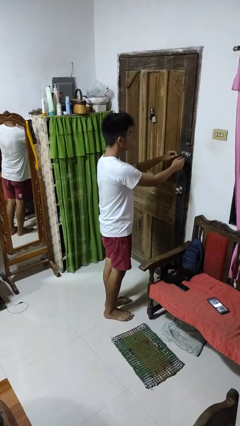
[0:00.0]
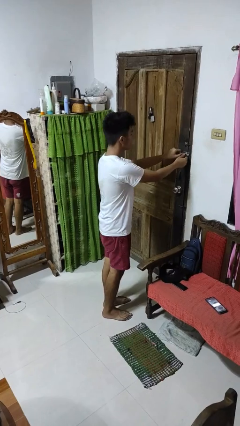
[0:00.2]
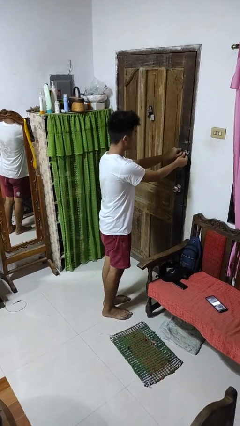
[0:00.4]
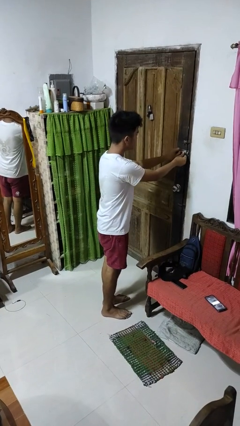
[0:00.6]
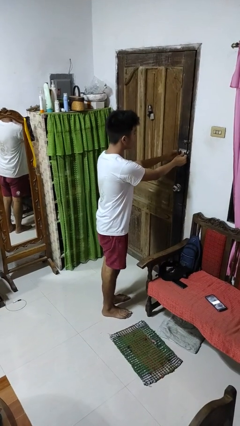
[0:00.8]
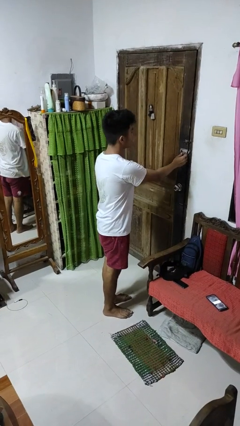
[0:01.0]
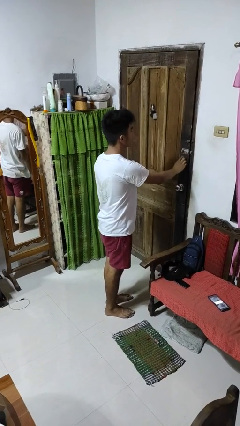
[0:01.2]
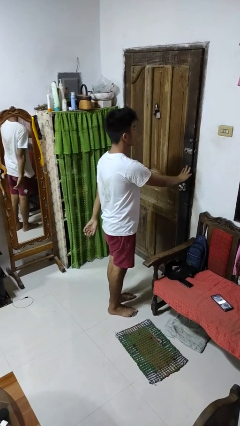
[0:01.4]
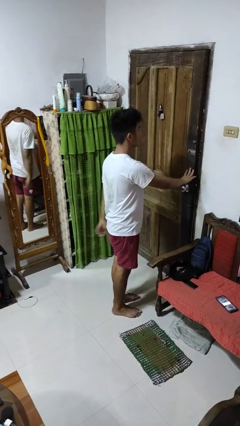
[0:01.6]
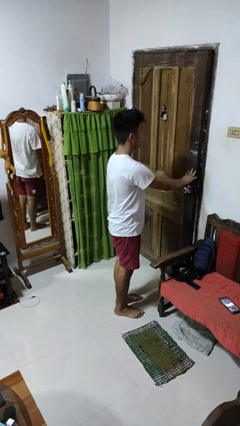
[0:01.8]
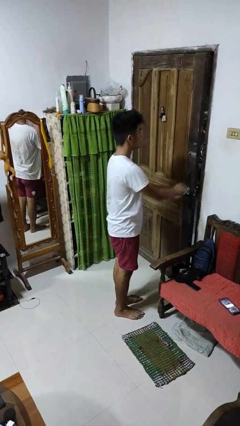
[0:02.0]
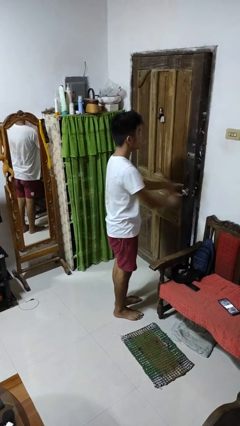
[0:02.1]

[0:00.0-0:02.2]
person unlocks door with keys

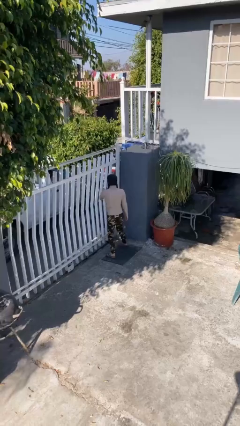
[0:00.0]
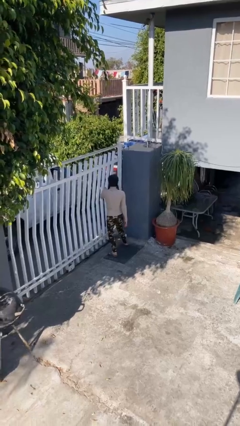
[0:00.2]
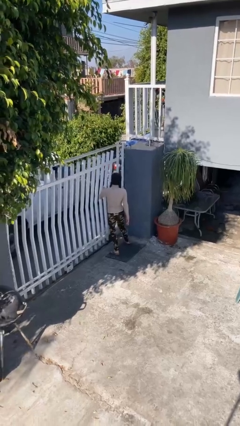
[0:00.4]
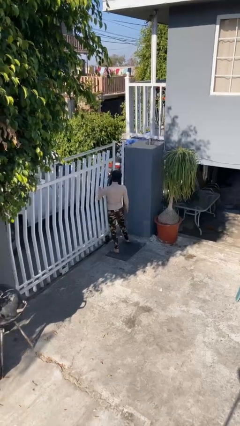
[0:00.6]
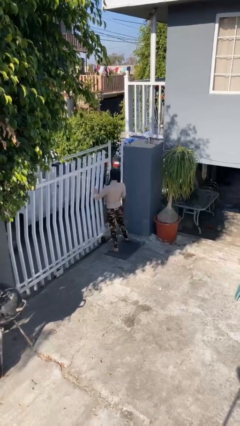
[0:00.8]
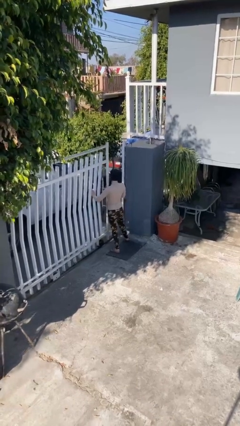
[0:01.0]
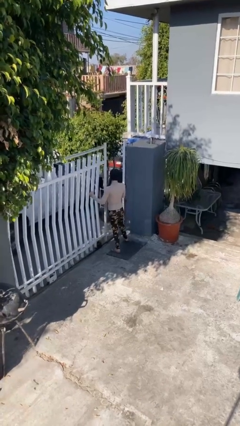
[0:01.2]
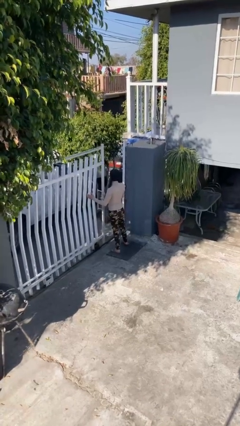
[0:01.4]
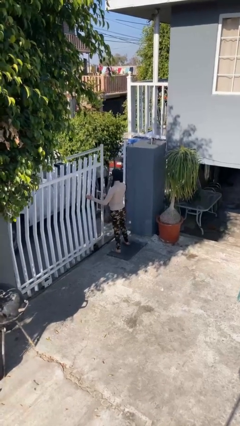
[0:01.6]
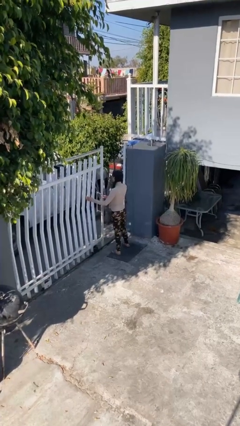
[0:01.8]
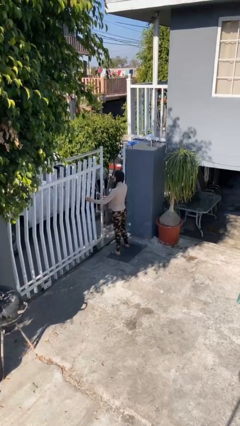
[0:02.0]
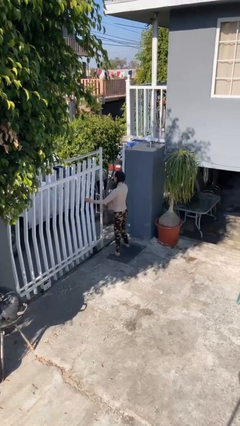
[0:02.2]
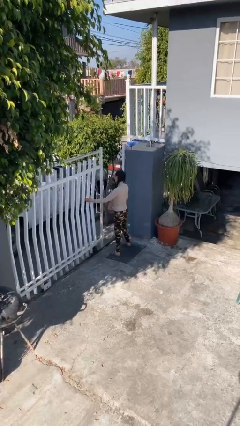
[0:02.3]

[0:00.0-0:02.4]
person opens facility door

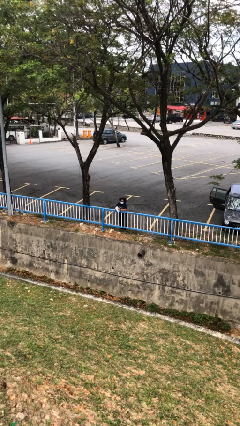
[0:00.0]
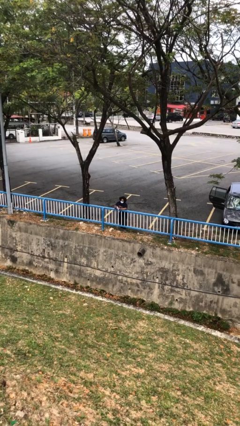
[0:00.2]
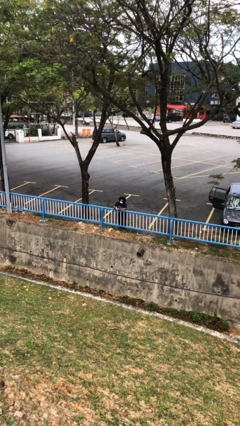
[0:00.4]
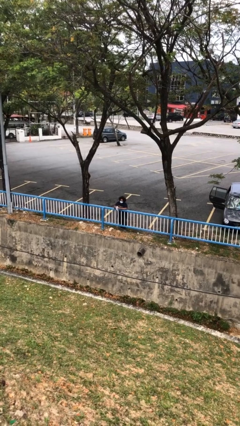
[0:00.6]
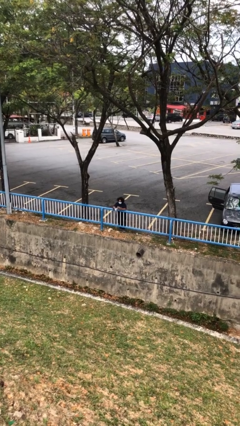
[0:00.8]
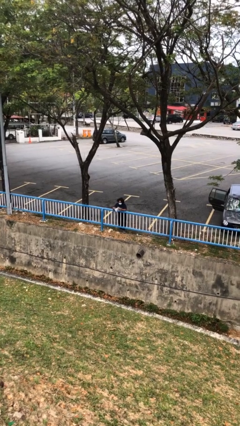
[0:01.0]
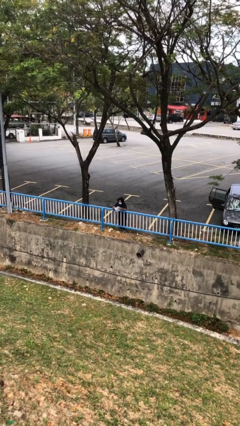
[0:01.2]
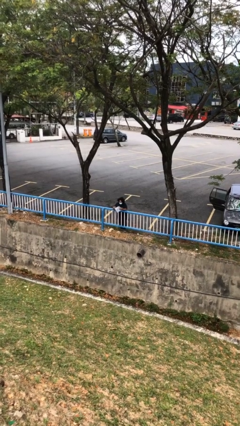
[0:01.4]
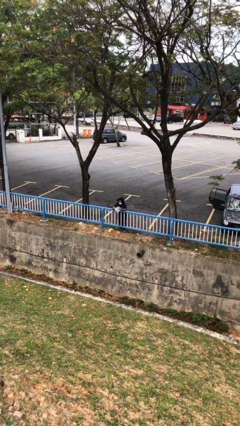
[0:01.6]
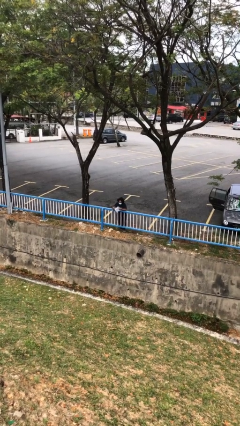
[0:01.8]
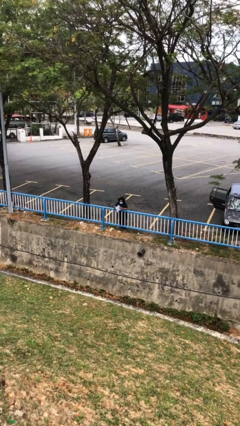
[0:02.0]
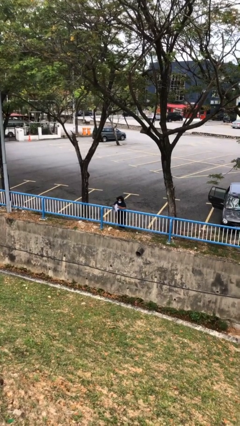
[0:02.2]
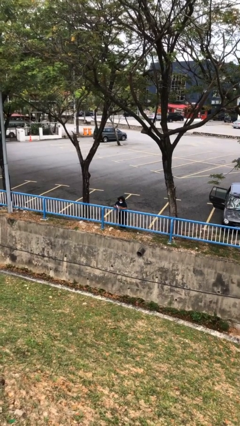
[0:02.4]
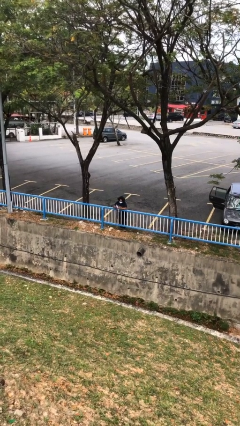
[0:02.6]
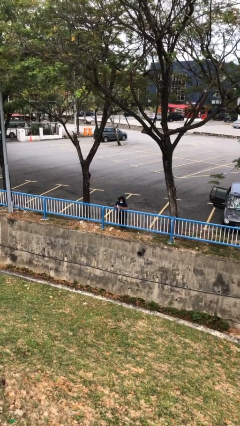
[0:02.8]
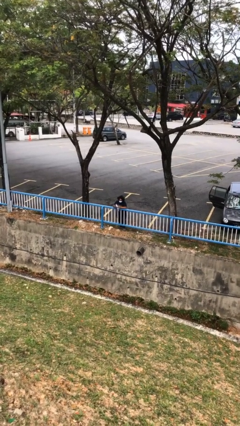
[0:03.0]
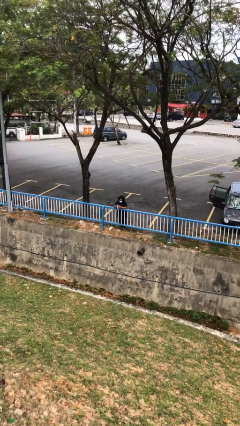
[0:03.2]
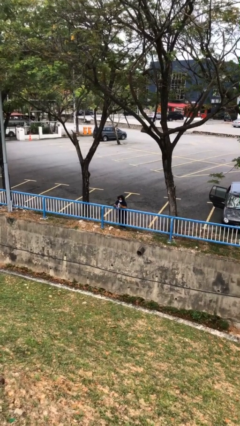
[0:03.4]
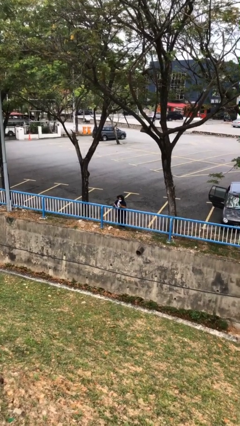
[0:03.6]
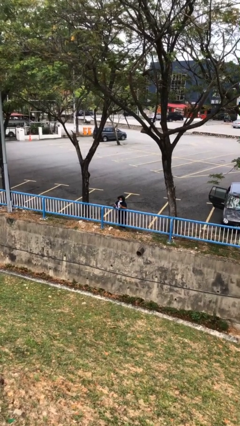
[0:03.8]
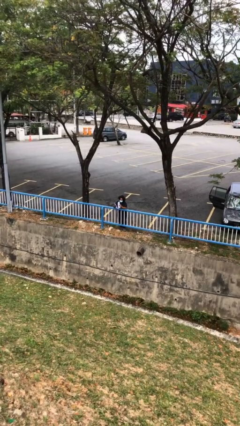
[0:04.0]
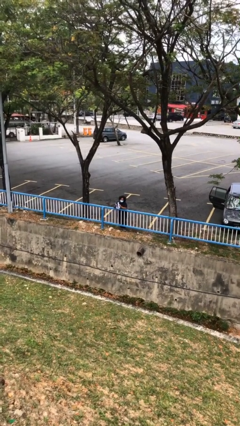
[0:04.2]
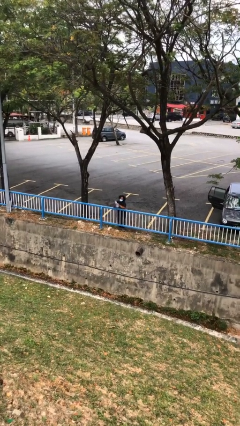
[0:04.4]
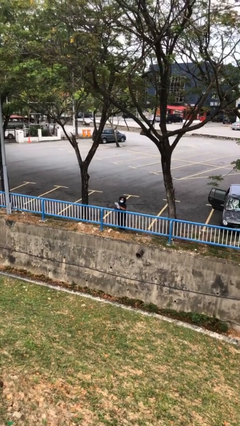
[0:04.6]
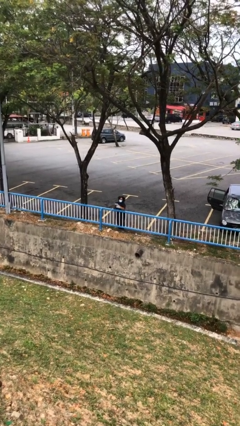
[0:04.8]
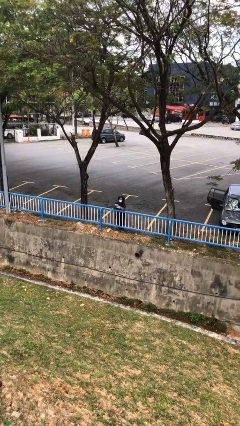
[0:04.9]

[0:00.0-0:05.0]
person reads document

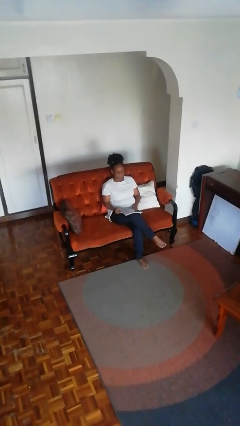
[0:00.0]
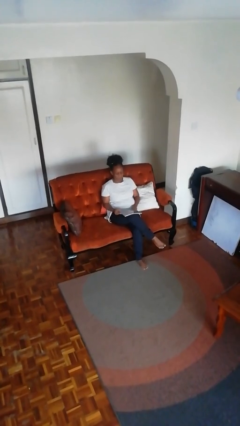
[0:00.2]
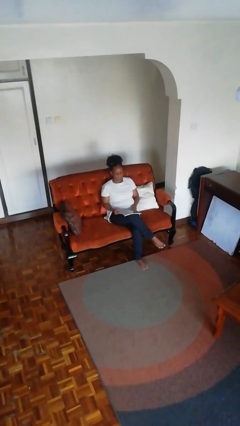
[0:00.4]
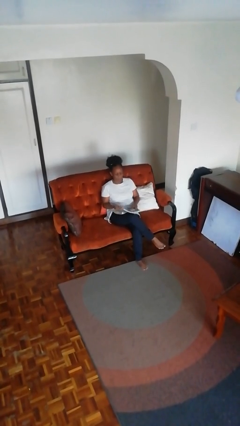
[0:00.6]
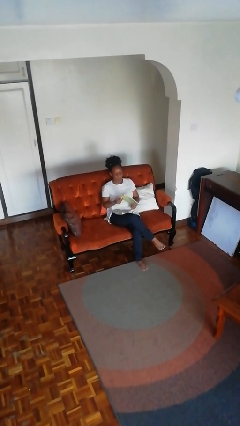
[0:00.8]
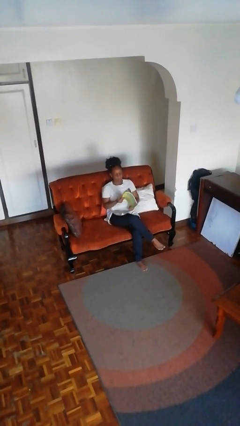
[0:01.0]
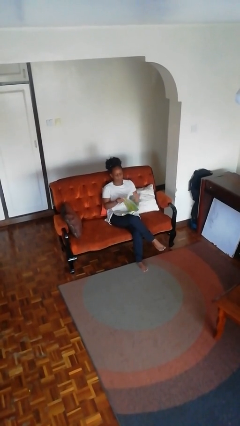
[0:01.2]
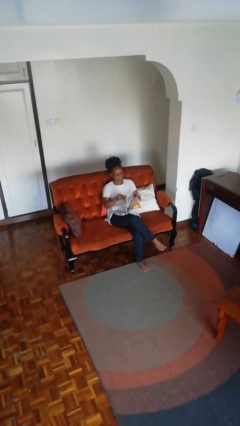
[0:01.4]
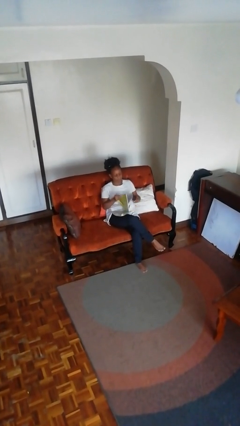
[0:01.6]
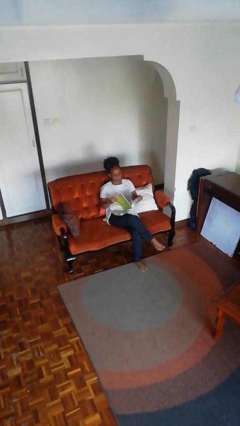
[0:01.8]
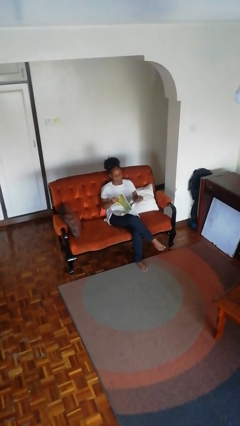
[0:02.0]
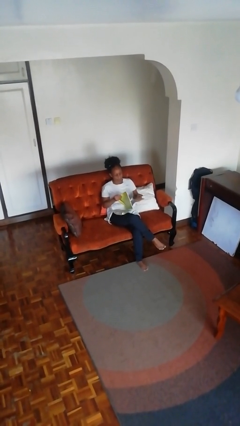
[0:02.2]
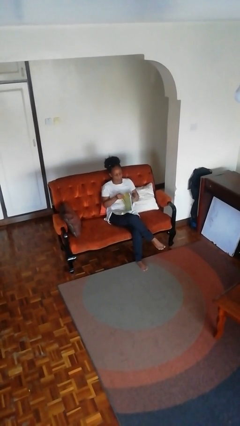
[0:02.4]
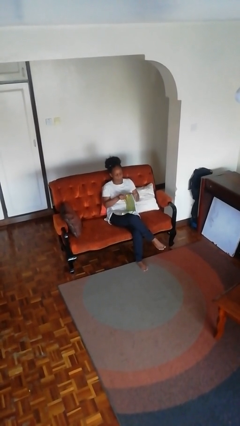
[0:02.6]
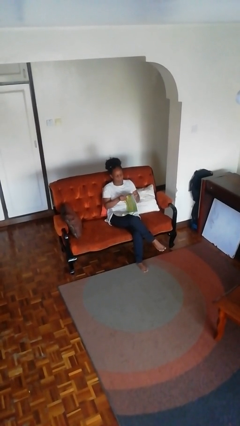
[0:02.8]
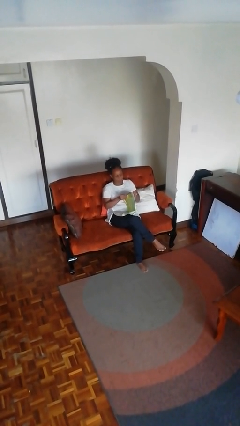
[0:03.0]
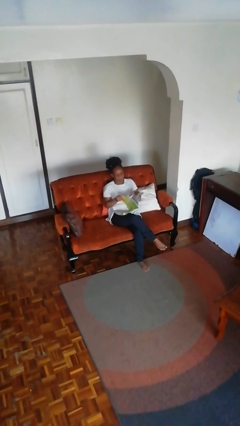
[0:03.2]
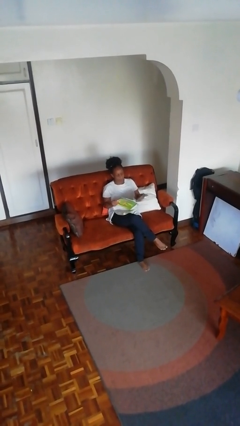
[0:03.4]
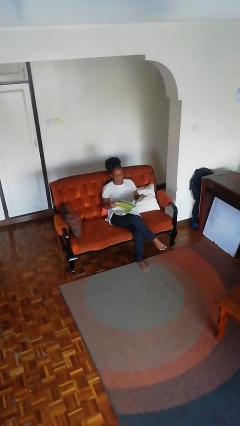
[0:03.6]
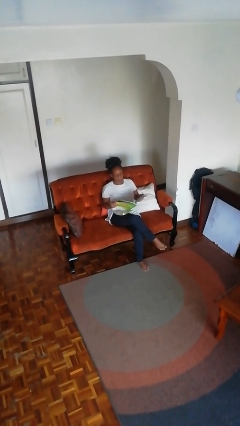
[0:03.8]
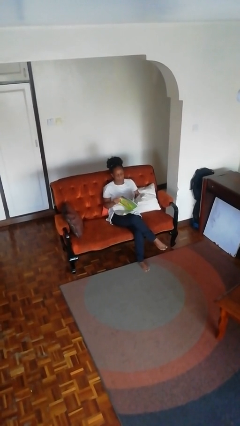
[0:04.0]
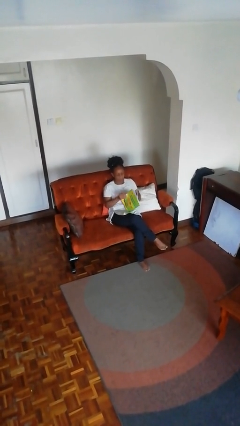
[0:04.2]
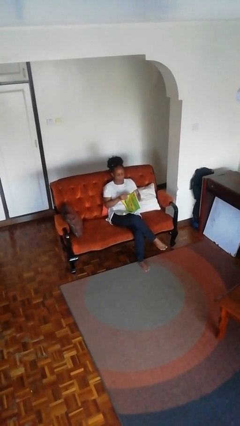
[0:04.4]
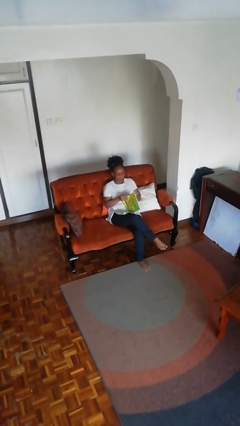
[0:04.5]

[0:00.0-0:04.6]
person reads magazine

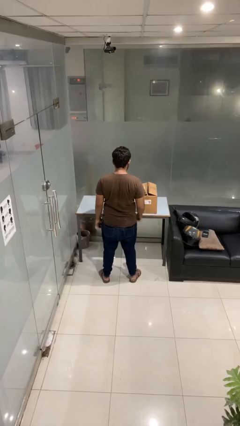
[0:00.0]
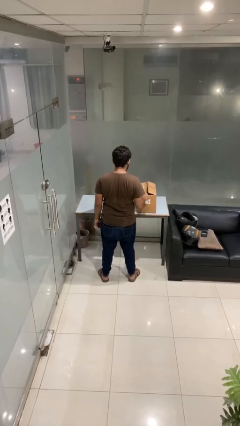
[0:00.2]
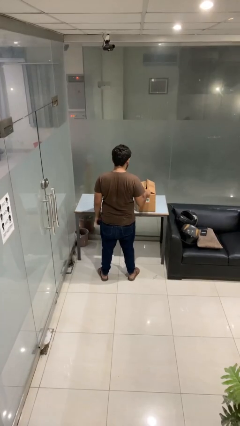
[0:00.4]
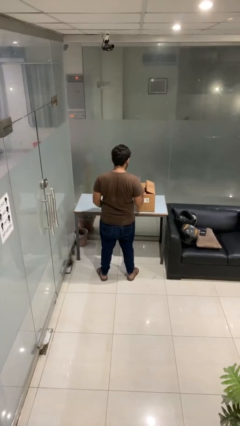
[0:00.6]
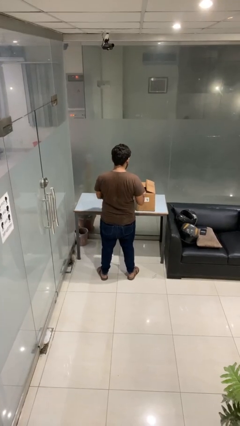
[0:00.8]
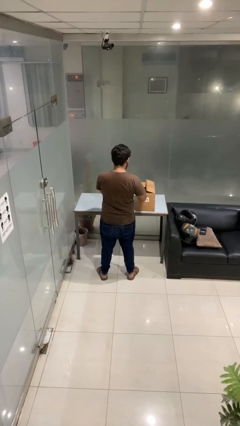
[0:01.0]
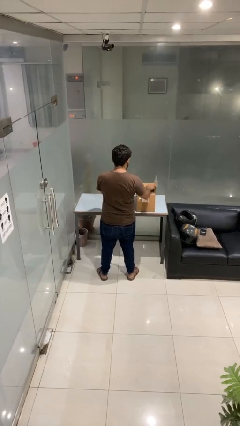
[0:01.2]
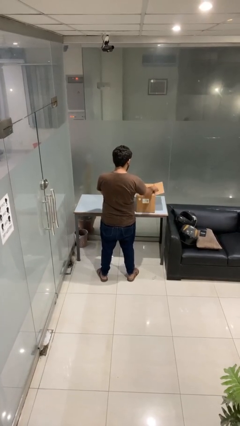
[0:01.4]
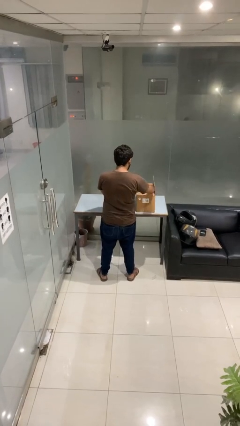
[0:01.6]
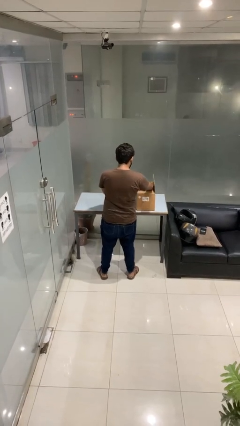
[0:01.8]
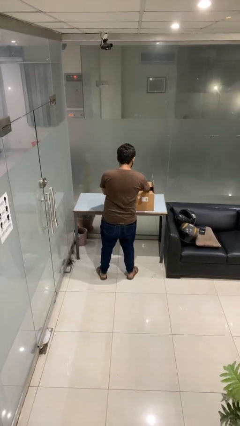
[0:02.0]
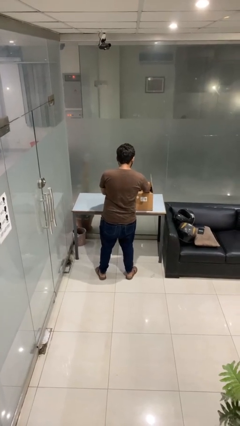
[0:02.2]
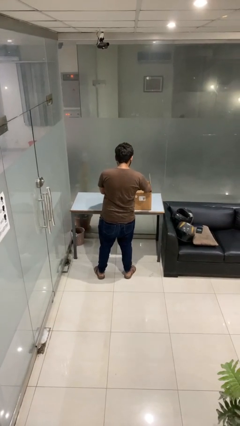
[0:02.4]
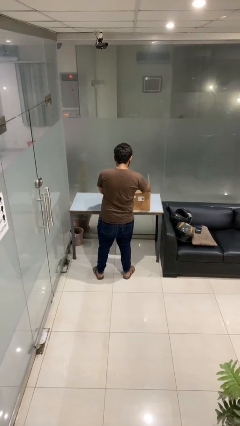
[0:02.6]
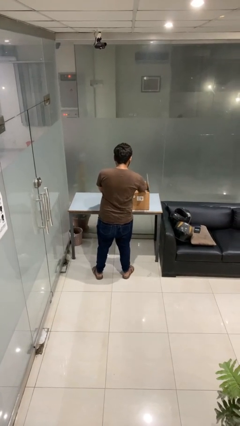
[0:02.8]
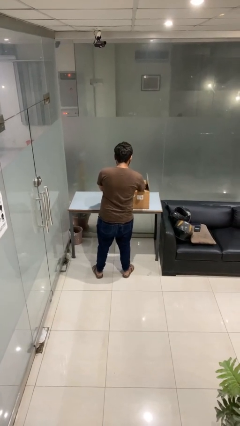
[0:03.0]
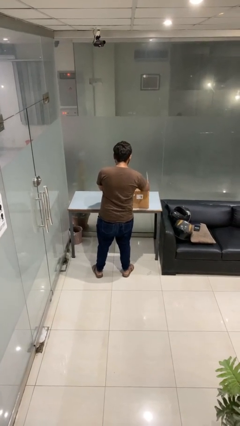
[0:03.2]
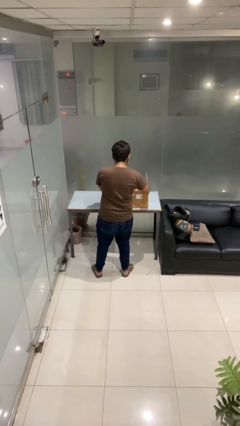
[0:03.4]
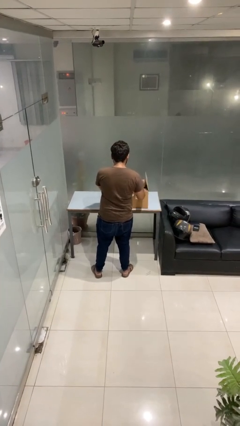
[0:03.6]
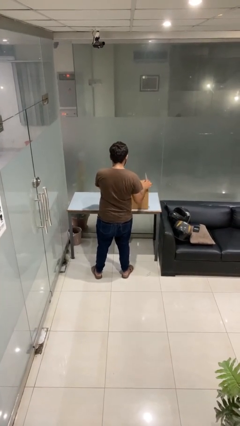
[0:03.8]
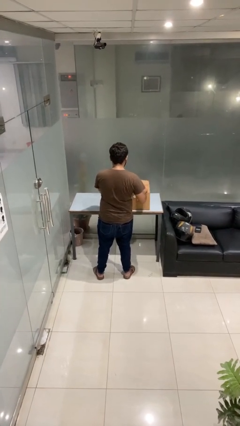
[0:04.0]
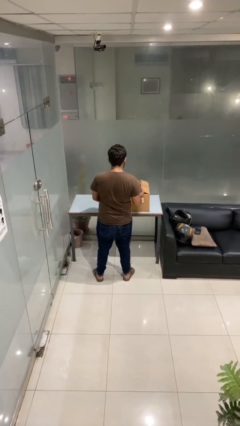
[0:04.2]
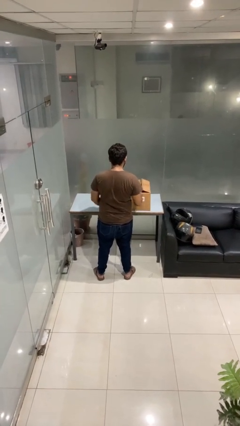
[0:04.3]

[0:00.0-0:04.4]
person searches in box
